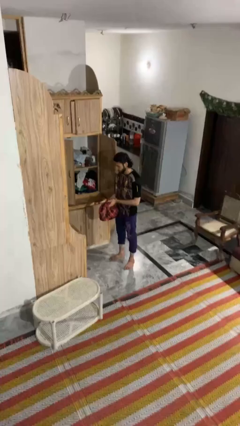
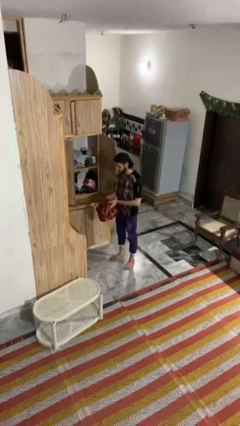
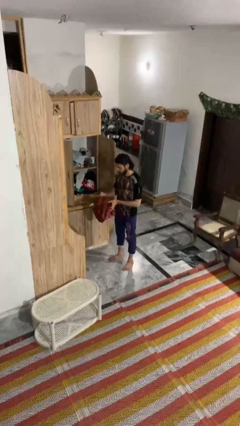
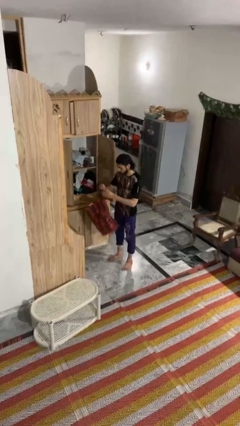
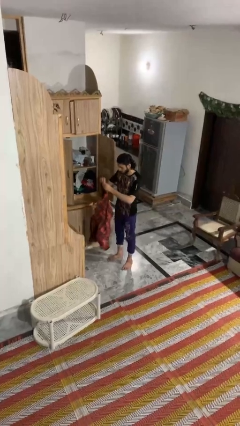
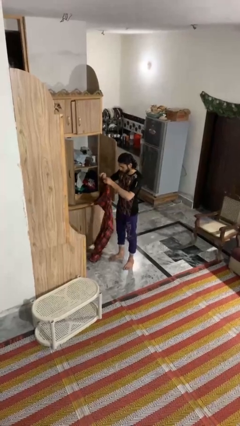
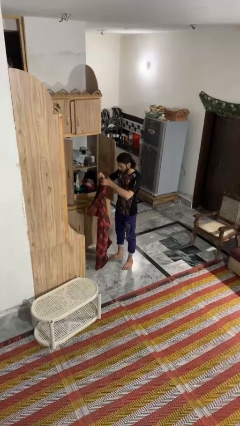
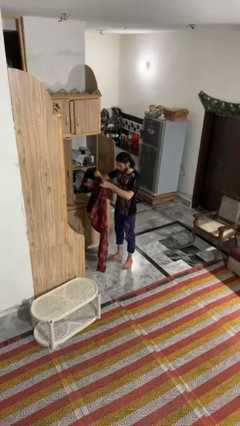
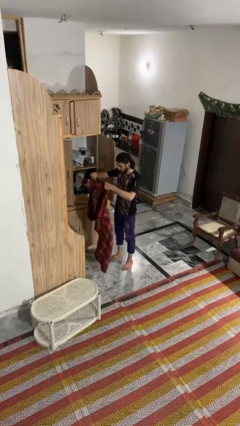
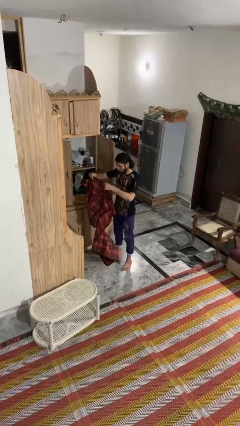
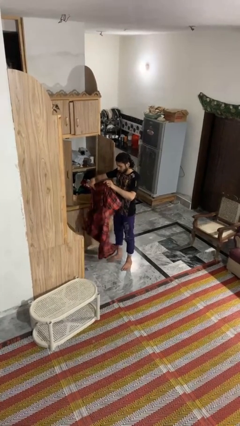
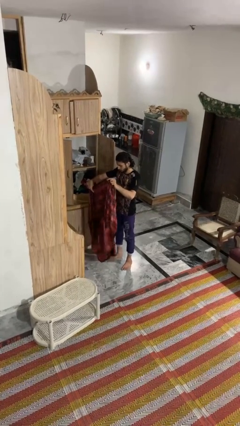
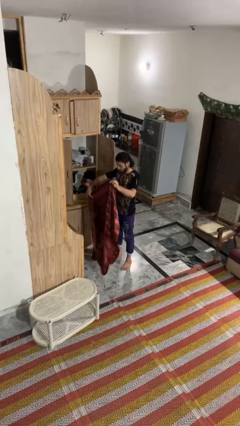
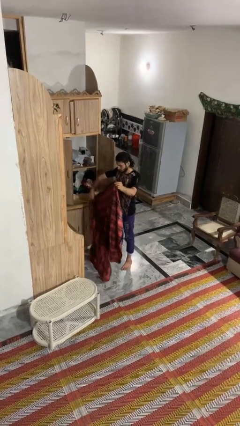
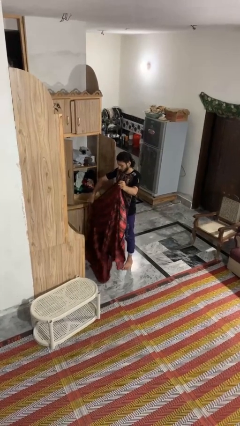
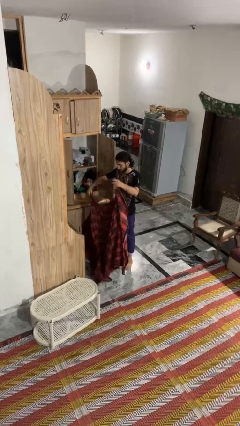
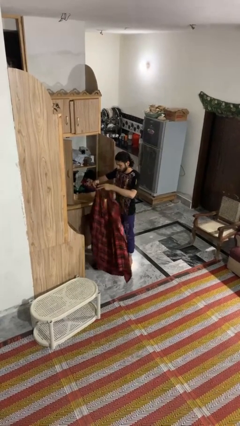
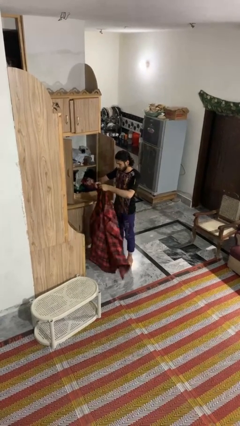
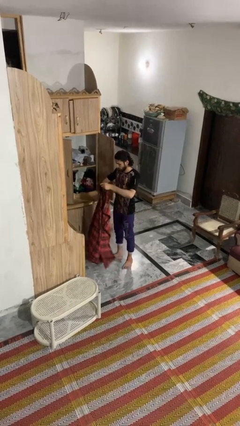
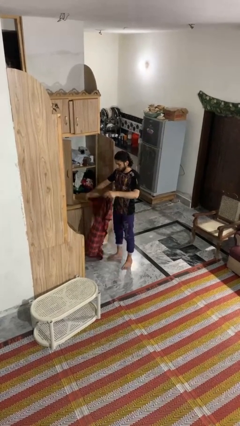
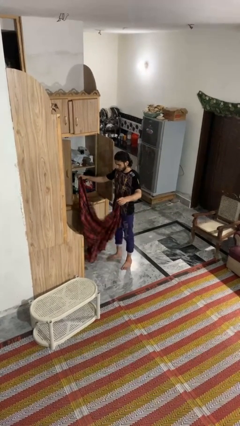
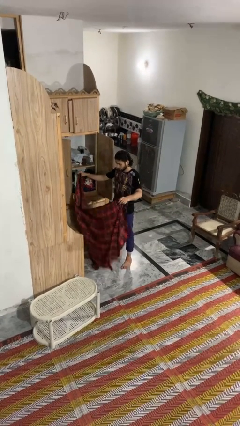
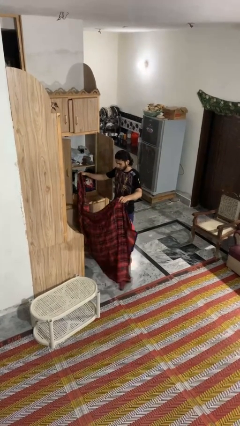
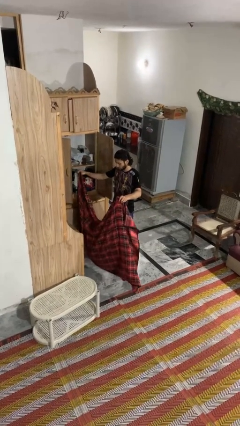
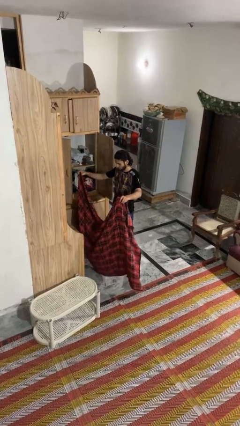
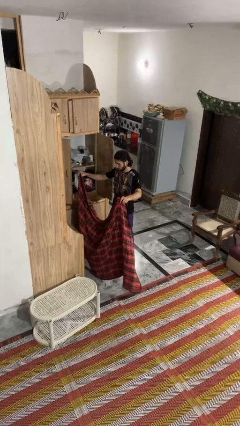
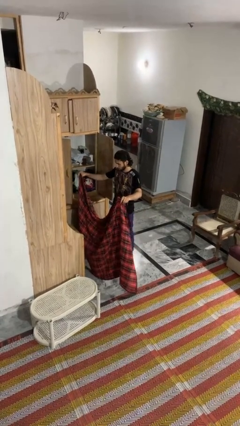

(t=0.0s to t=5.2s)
person unfolds blanket

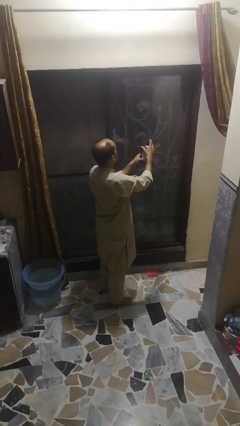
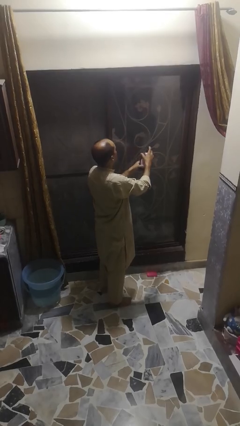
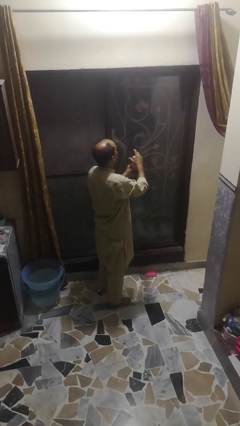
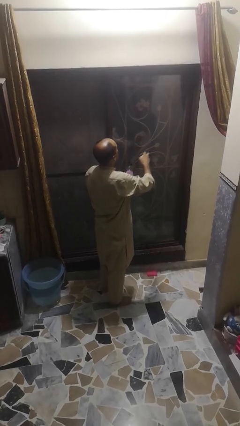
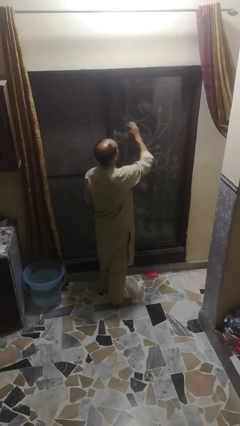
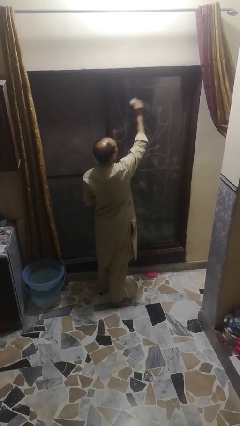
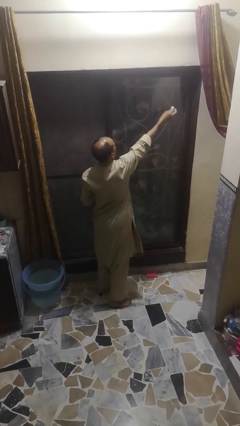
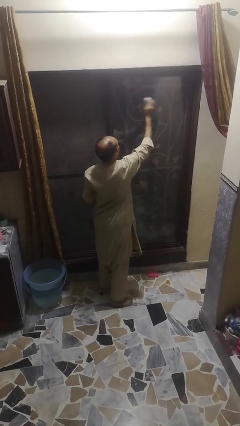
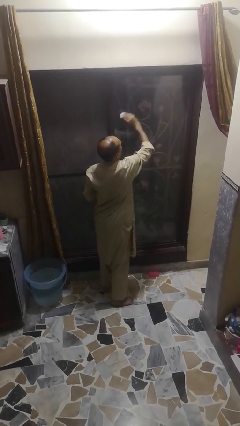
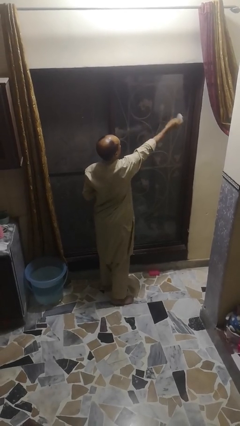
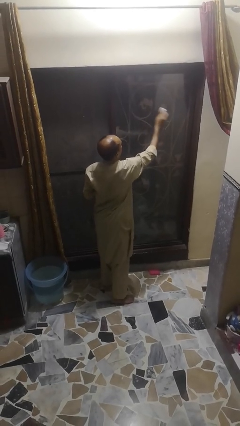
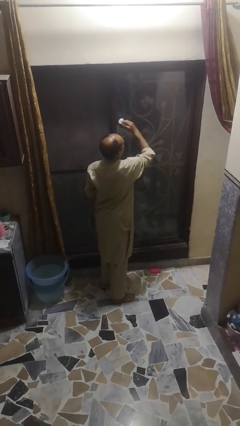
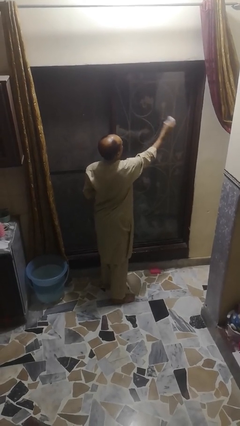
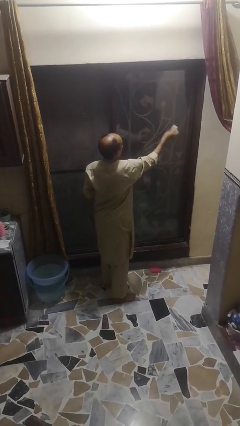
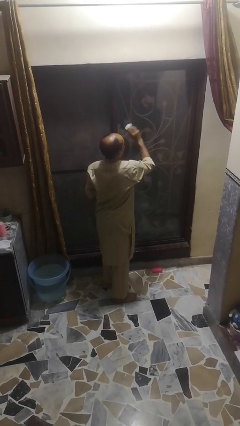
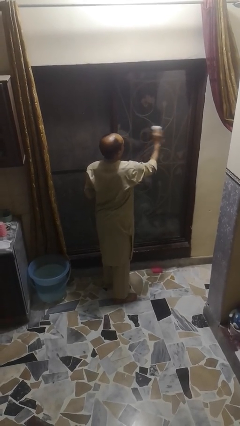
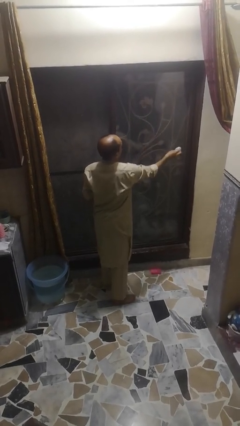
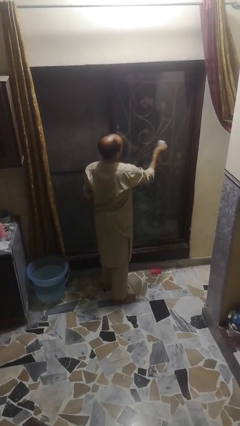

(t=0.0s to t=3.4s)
person washes window

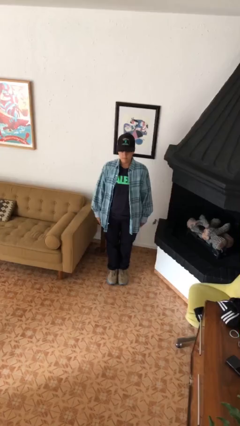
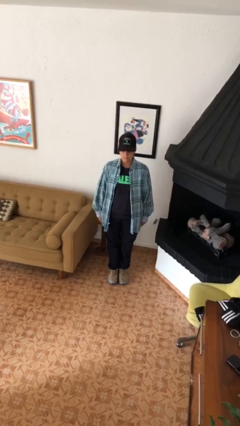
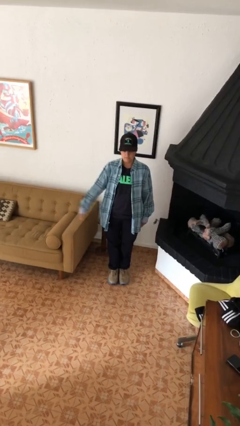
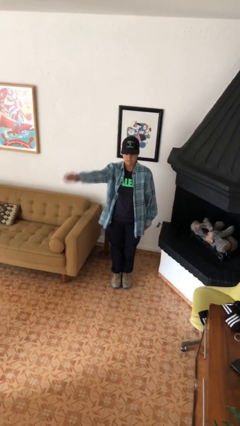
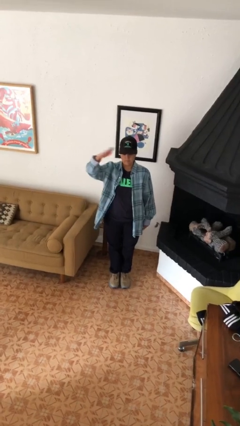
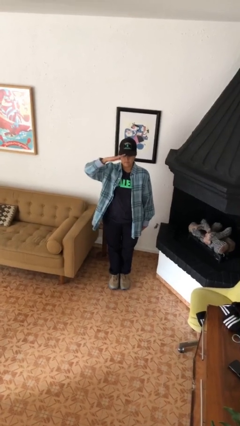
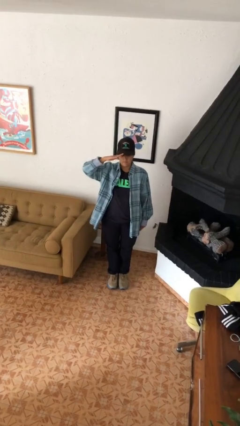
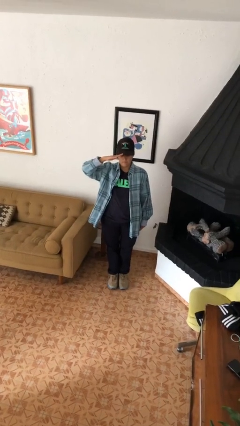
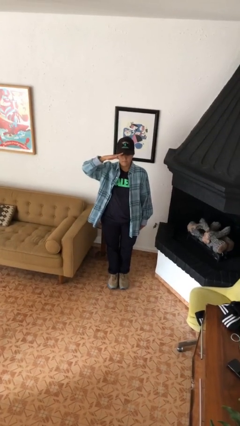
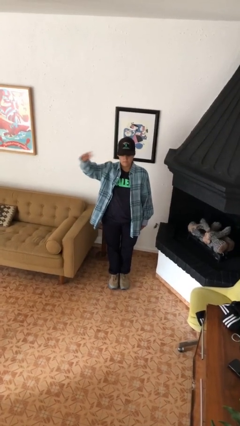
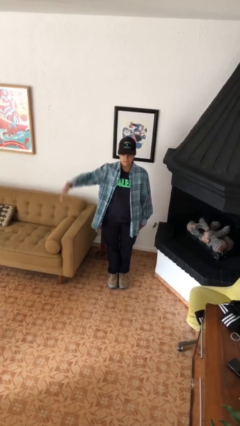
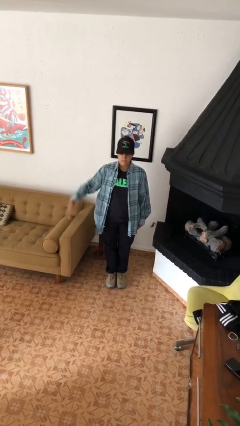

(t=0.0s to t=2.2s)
person salutes

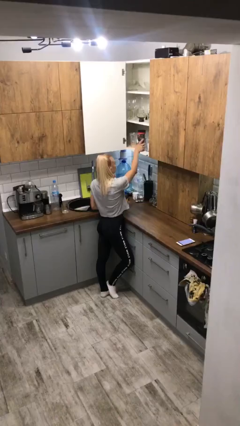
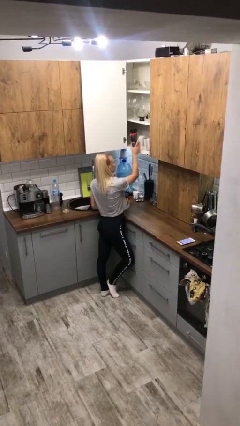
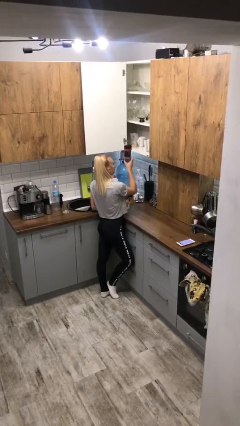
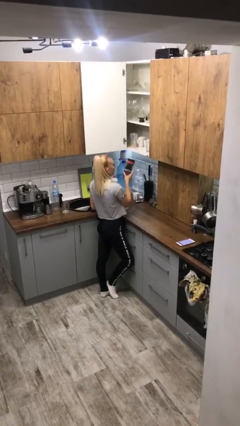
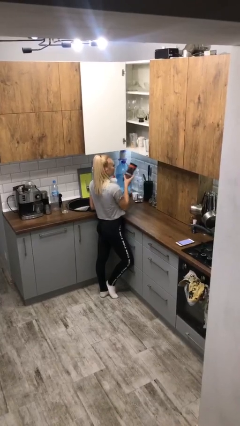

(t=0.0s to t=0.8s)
person picks up object from shelf

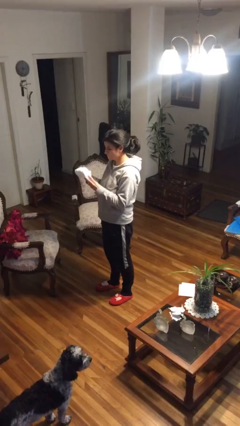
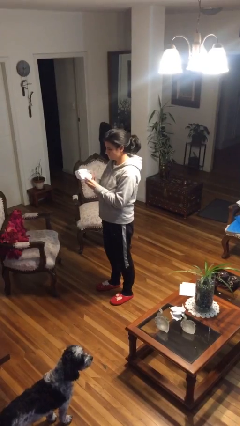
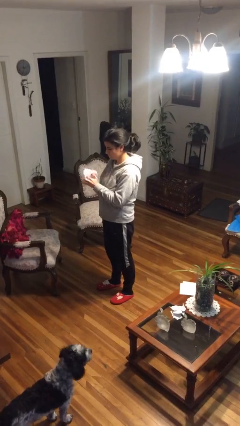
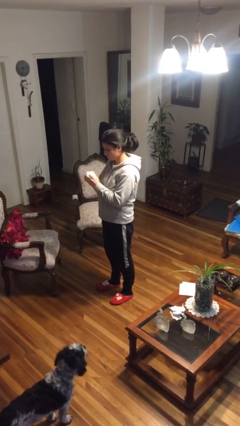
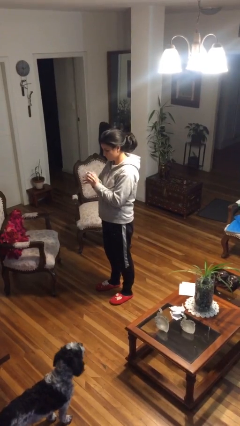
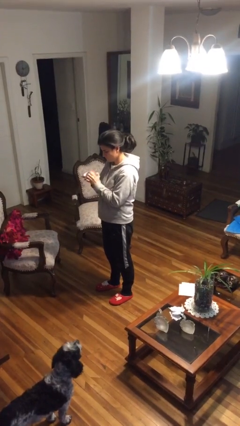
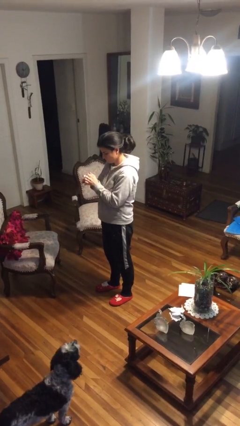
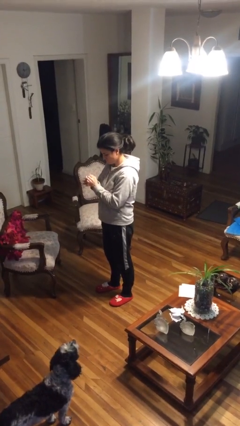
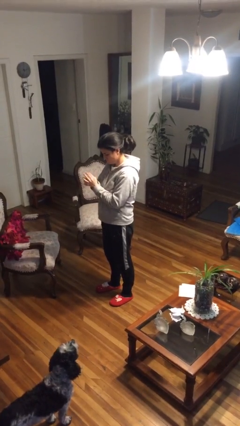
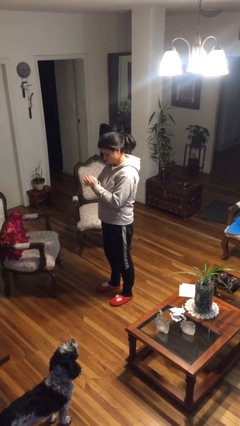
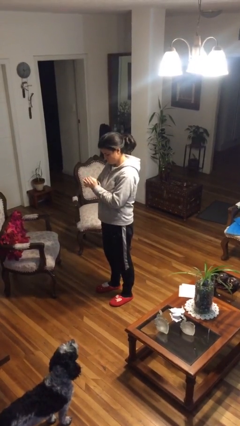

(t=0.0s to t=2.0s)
person crumples paper

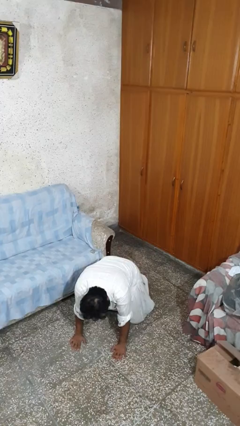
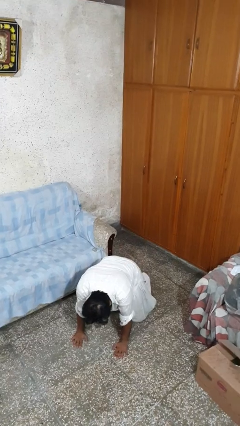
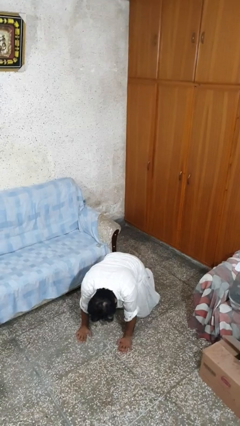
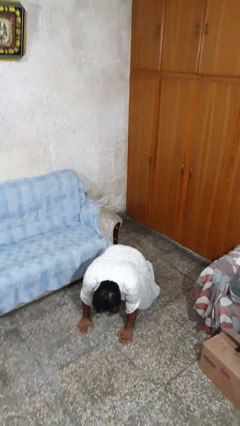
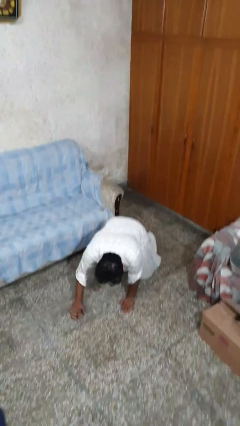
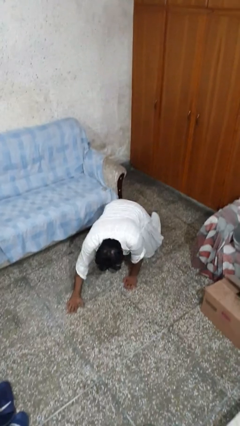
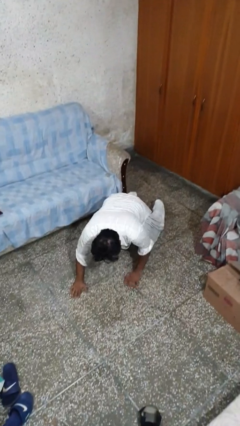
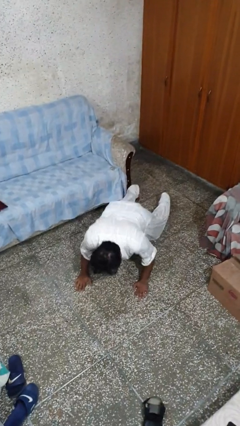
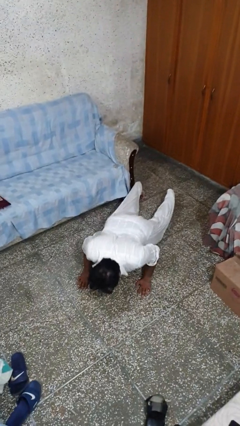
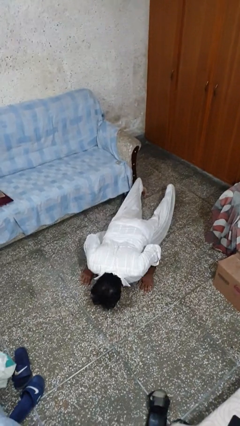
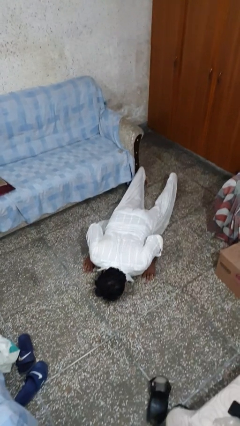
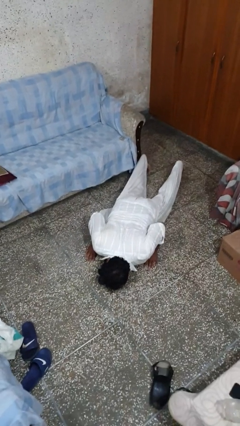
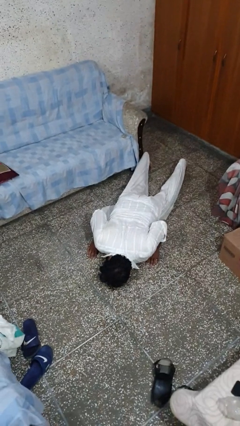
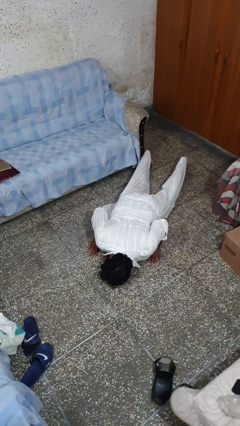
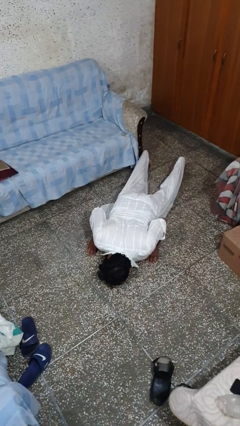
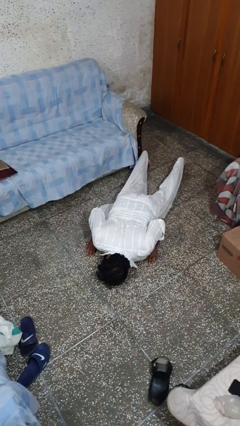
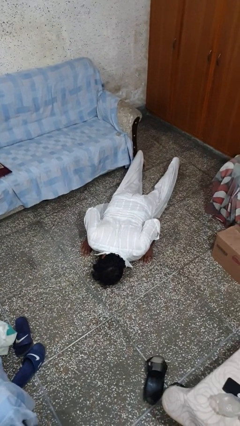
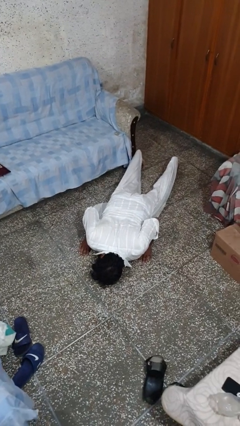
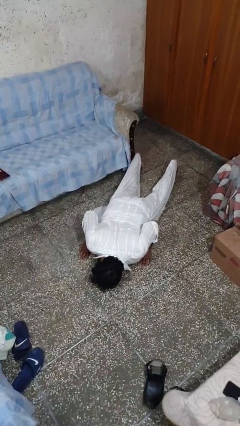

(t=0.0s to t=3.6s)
person lies down on floor
